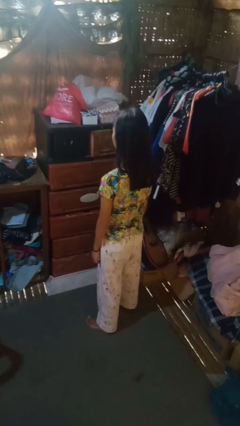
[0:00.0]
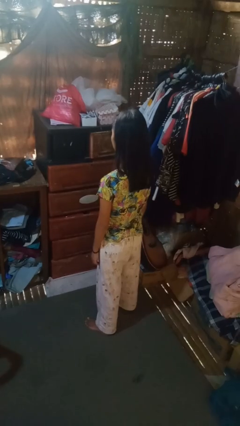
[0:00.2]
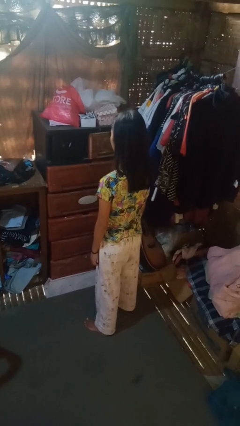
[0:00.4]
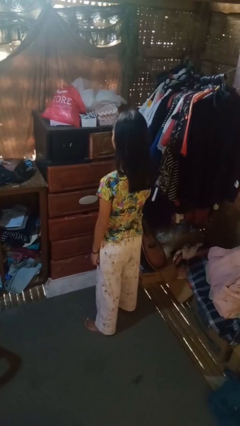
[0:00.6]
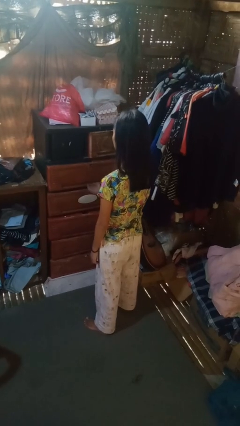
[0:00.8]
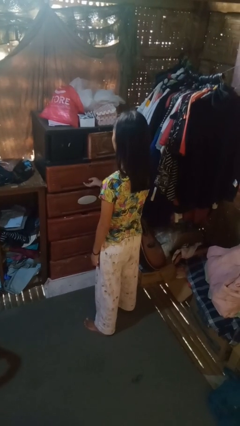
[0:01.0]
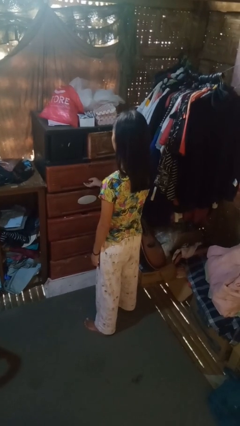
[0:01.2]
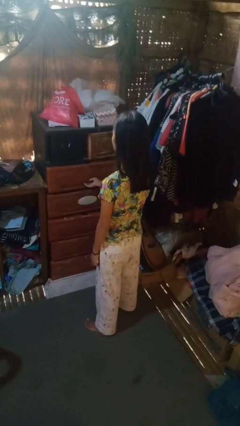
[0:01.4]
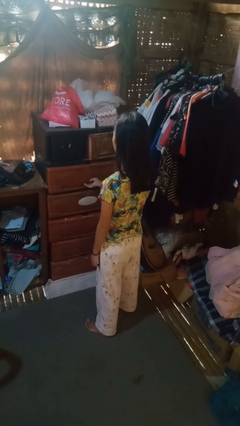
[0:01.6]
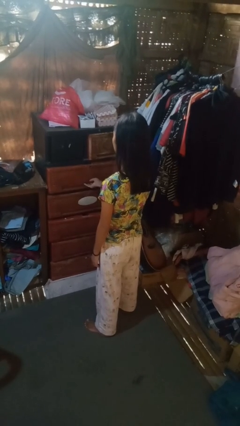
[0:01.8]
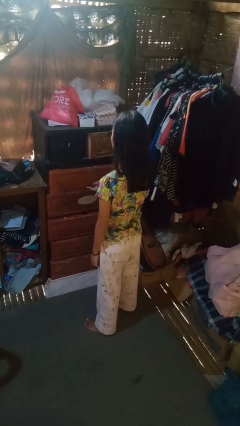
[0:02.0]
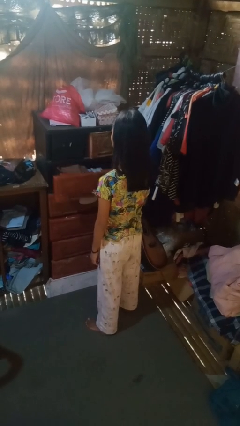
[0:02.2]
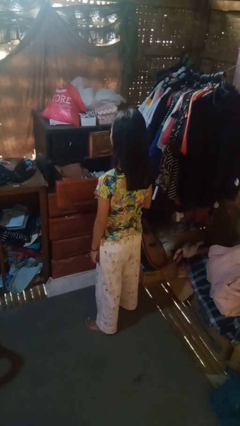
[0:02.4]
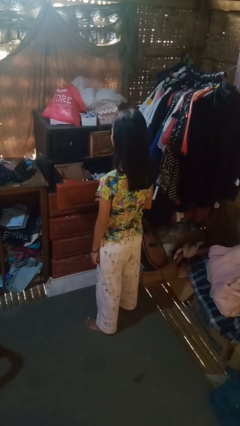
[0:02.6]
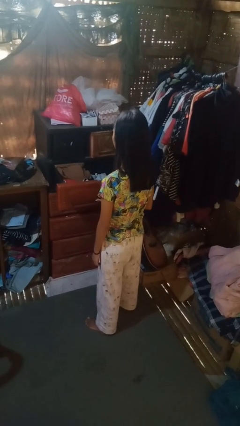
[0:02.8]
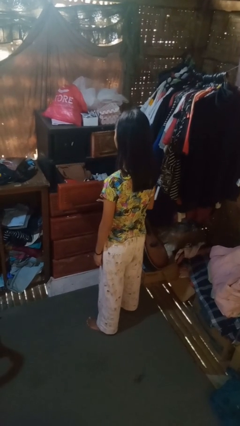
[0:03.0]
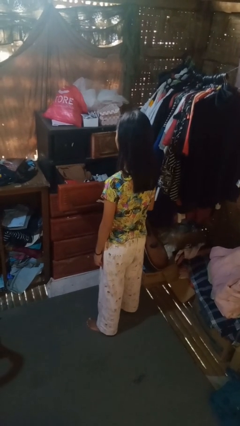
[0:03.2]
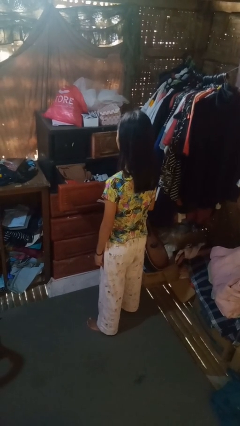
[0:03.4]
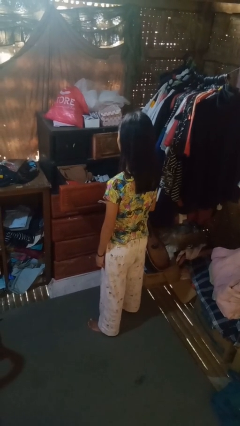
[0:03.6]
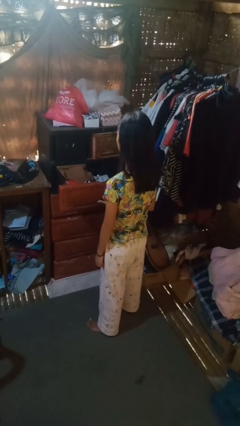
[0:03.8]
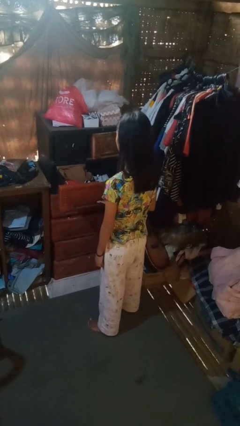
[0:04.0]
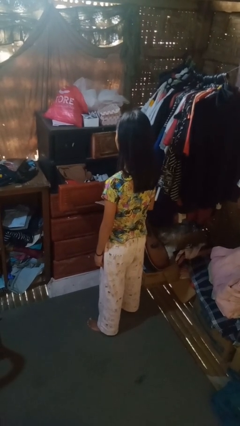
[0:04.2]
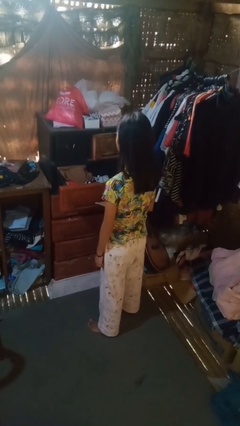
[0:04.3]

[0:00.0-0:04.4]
person opens dresser drawer

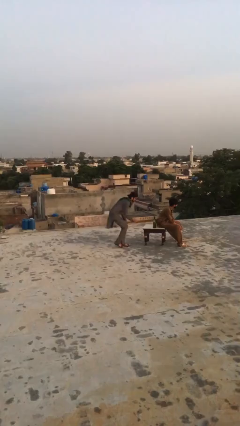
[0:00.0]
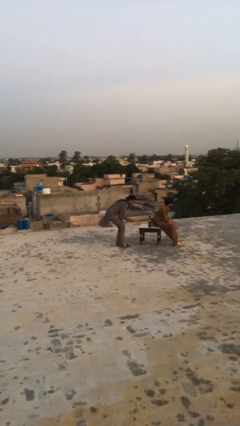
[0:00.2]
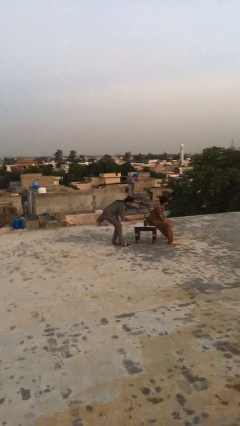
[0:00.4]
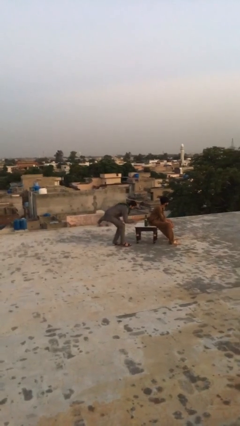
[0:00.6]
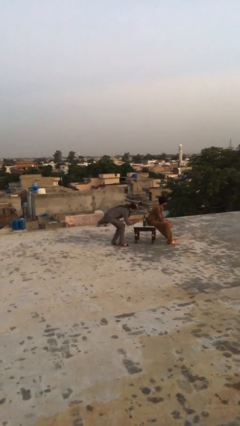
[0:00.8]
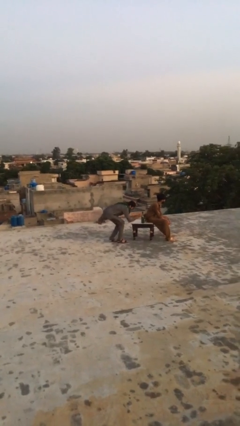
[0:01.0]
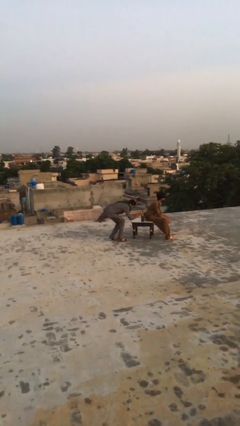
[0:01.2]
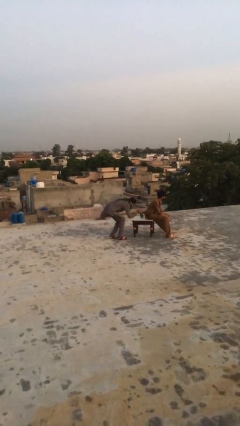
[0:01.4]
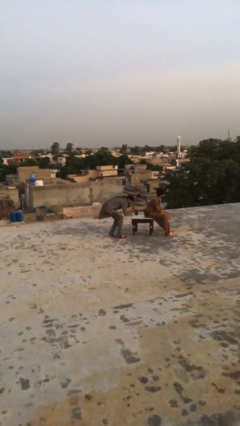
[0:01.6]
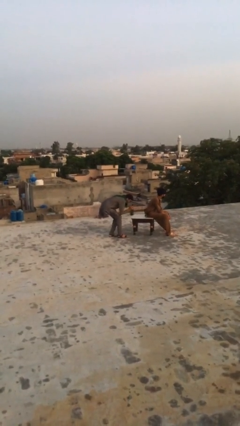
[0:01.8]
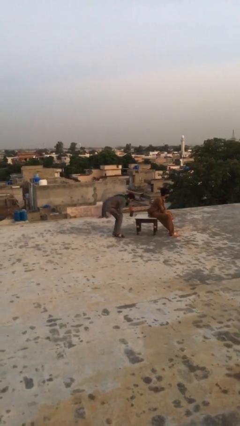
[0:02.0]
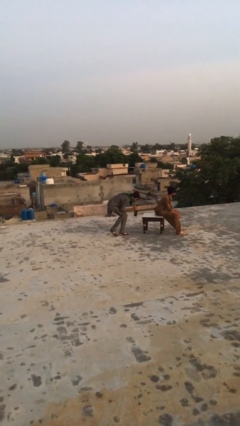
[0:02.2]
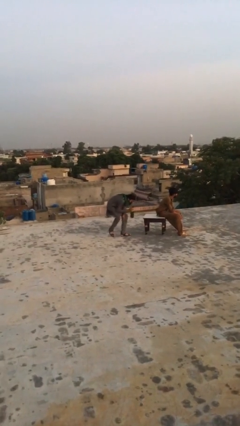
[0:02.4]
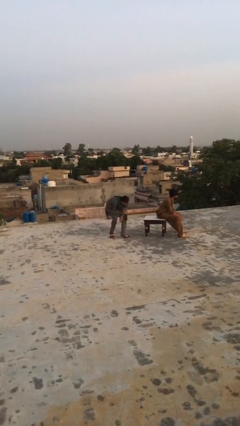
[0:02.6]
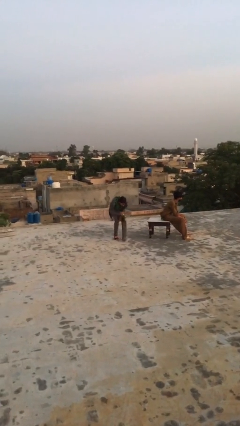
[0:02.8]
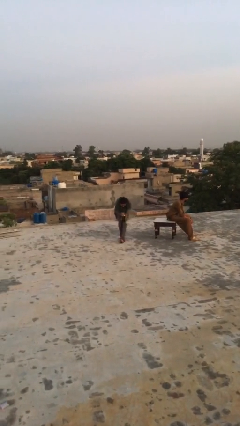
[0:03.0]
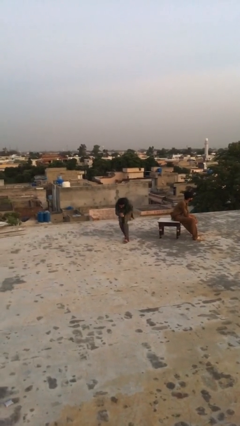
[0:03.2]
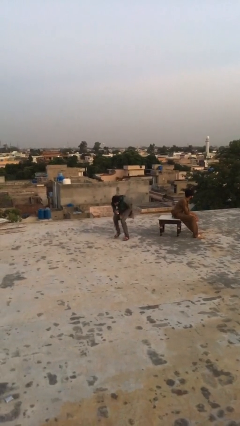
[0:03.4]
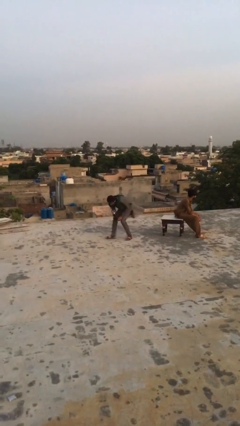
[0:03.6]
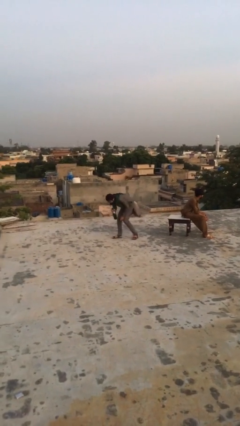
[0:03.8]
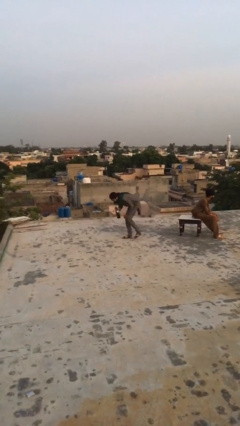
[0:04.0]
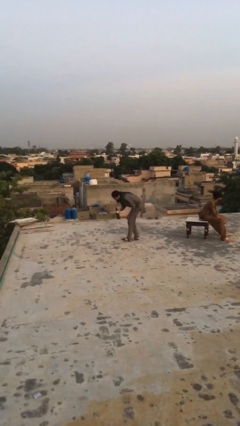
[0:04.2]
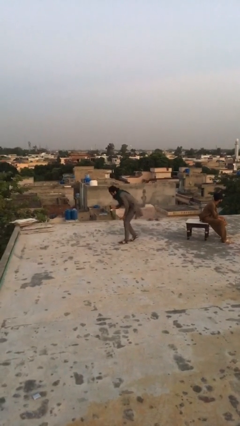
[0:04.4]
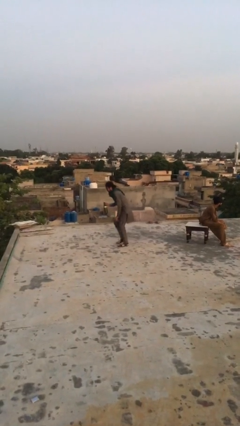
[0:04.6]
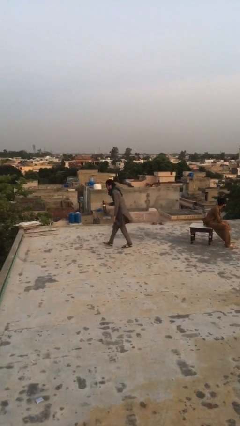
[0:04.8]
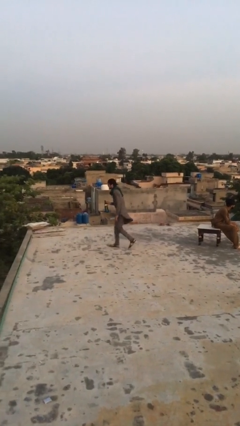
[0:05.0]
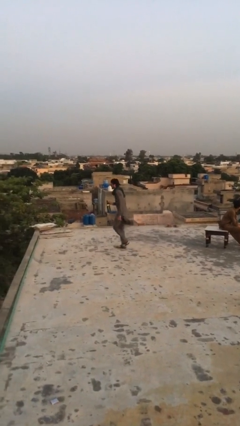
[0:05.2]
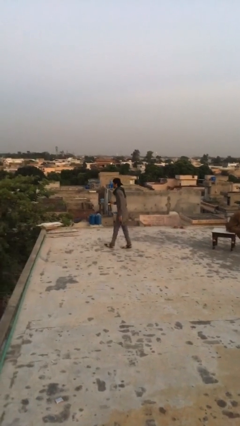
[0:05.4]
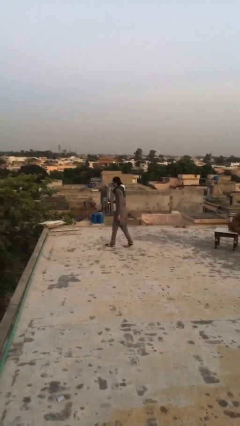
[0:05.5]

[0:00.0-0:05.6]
person steals object from person

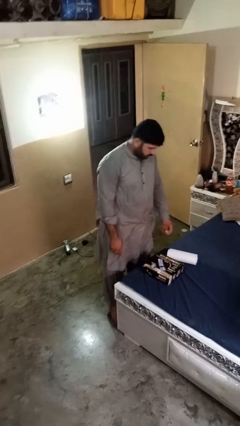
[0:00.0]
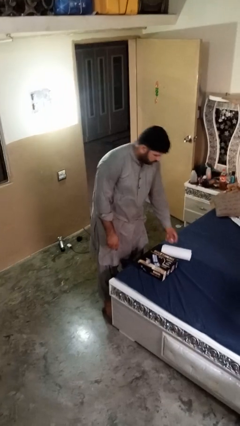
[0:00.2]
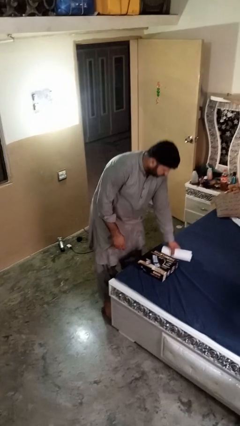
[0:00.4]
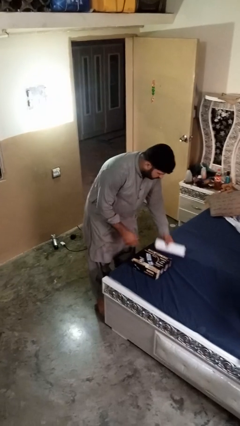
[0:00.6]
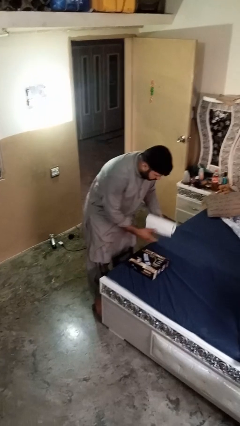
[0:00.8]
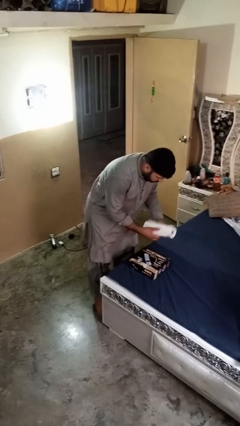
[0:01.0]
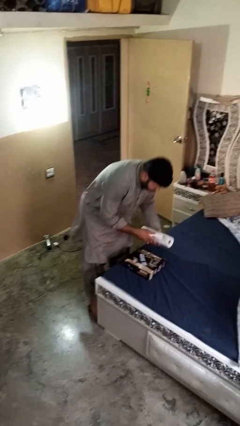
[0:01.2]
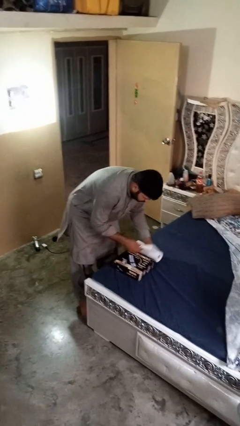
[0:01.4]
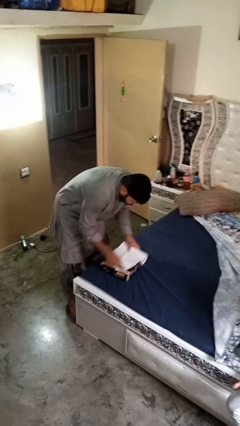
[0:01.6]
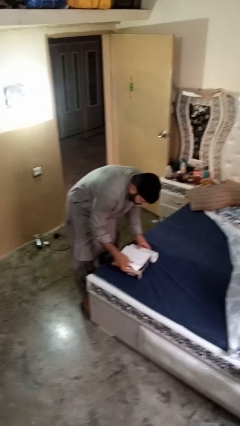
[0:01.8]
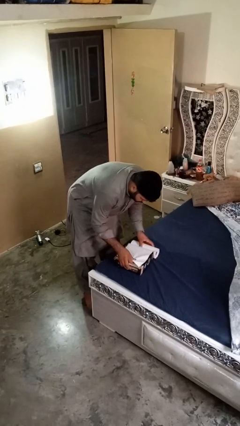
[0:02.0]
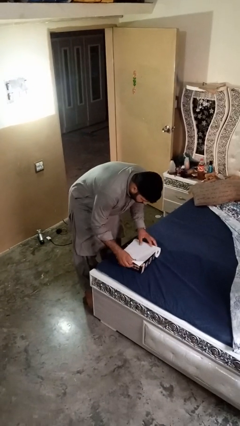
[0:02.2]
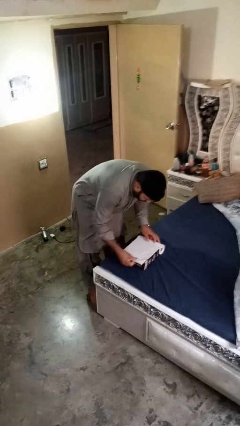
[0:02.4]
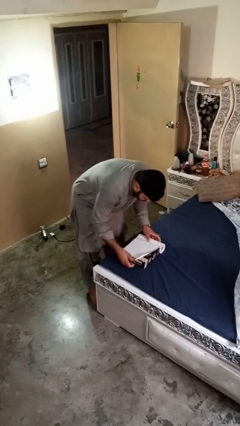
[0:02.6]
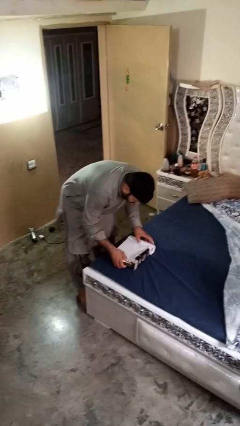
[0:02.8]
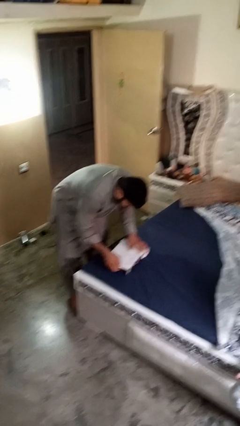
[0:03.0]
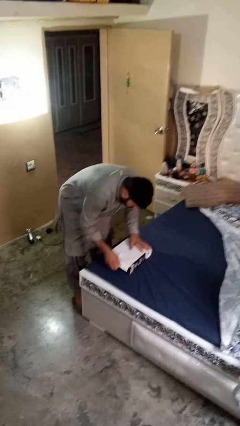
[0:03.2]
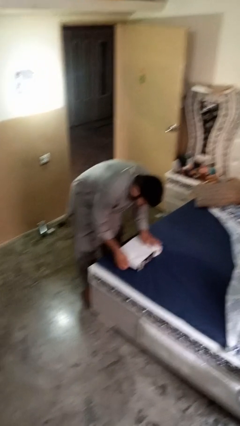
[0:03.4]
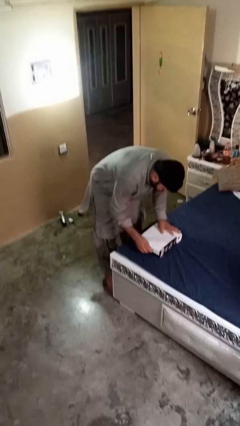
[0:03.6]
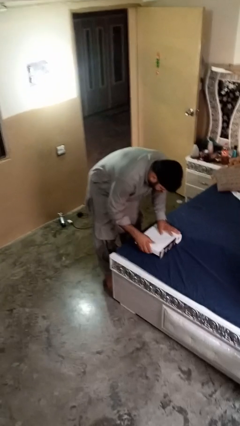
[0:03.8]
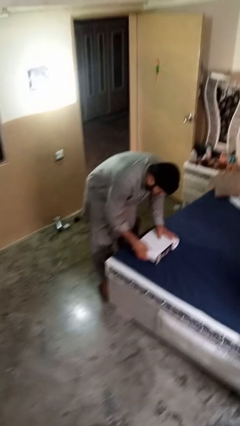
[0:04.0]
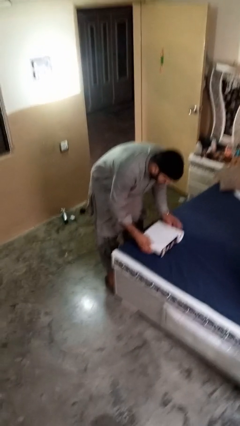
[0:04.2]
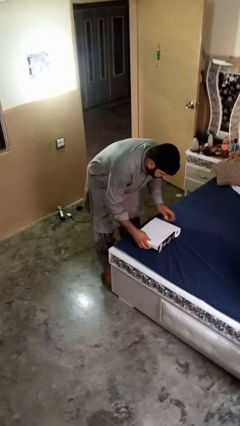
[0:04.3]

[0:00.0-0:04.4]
person wraps box

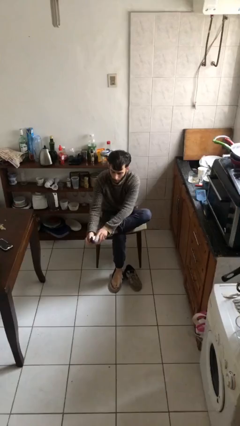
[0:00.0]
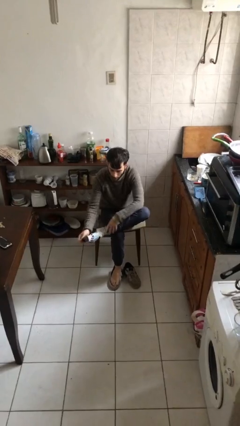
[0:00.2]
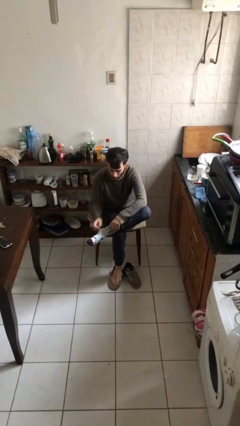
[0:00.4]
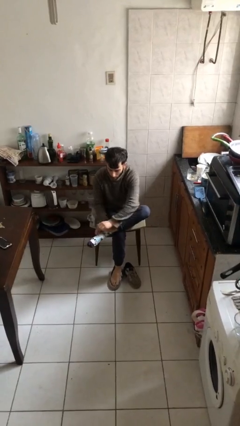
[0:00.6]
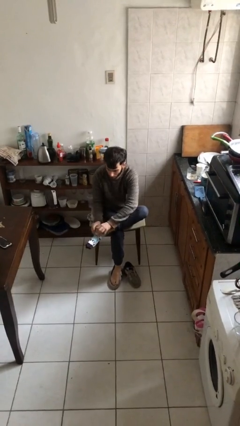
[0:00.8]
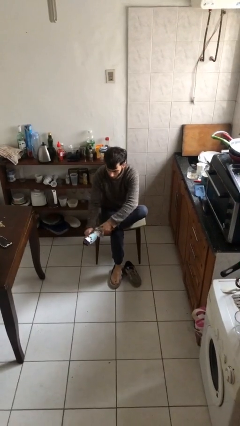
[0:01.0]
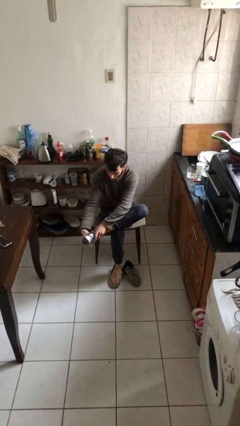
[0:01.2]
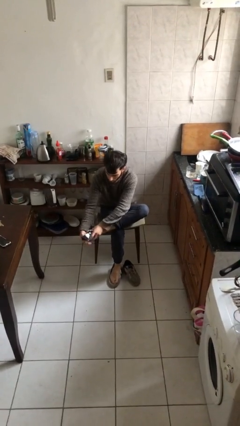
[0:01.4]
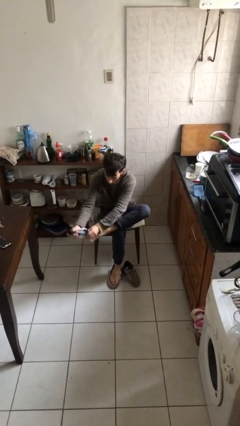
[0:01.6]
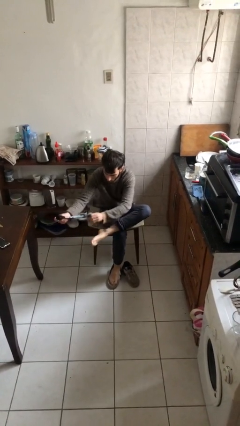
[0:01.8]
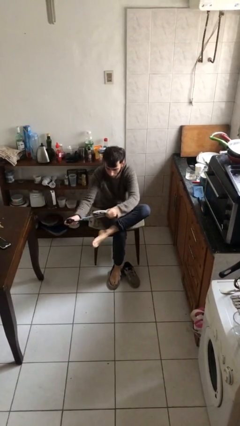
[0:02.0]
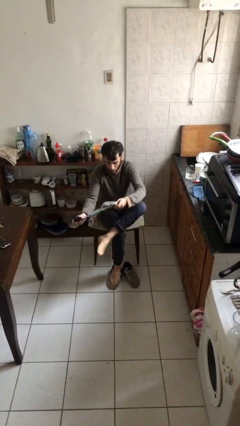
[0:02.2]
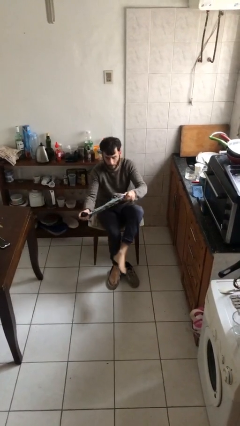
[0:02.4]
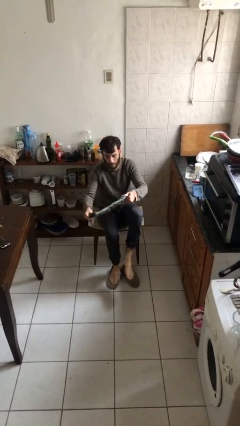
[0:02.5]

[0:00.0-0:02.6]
person takes off socks

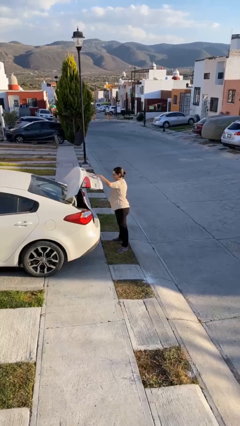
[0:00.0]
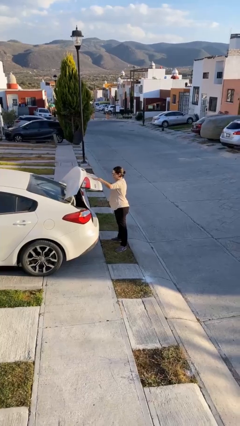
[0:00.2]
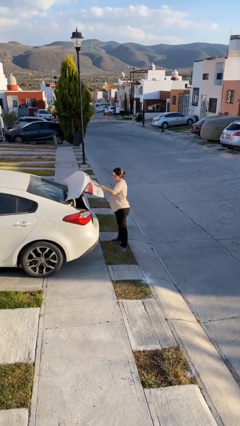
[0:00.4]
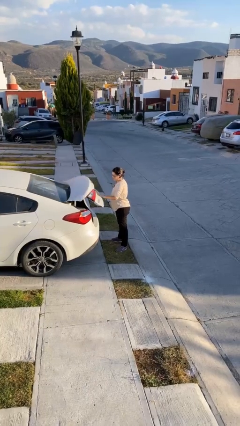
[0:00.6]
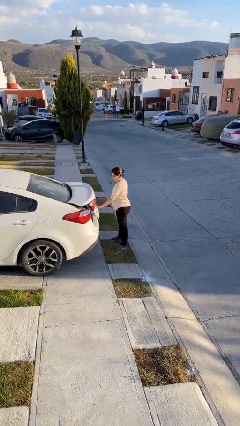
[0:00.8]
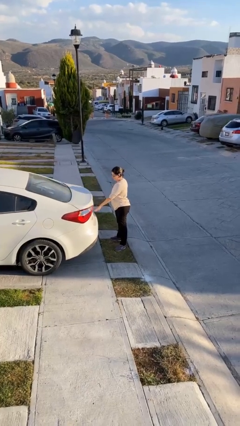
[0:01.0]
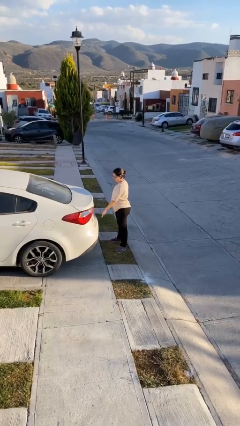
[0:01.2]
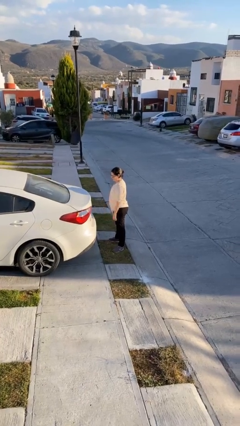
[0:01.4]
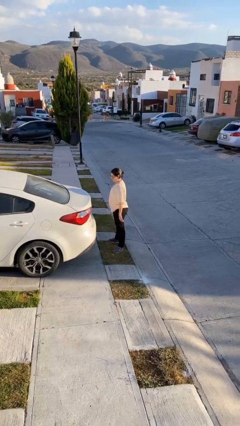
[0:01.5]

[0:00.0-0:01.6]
person closes car trunk
